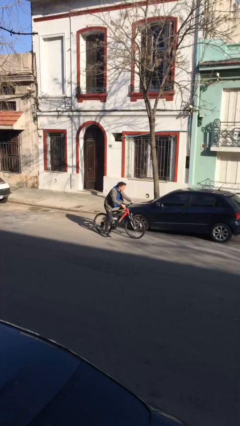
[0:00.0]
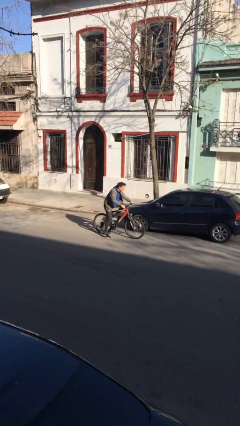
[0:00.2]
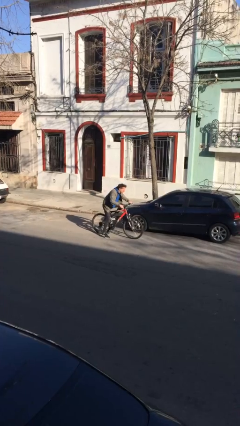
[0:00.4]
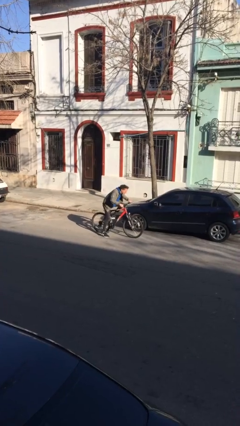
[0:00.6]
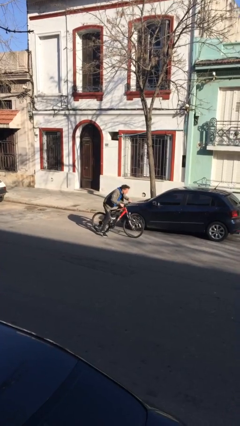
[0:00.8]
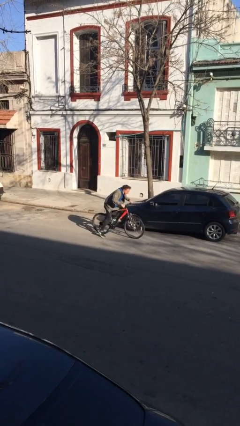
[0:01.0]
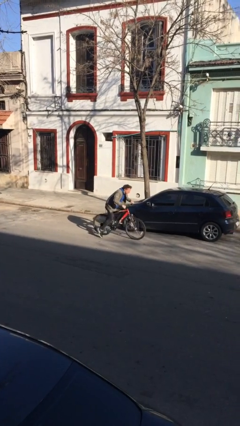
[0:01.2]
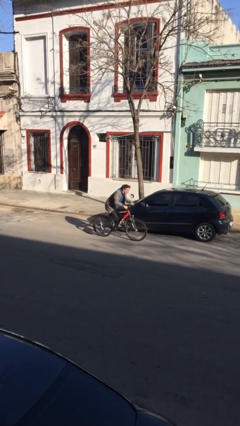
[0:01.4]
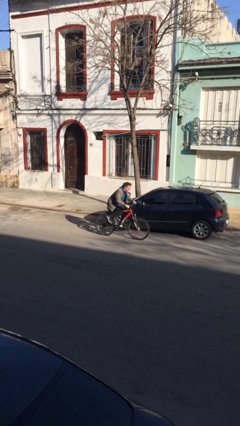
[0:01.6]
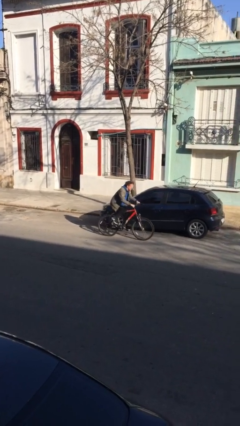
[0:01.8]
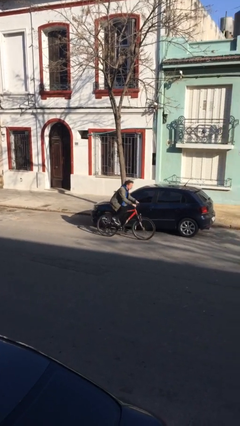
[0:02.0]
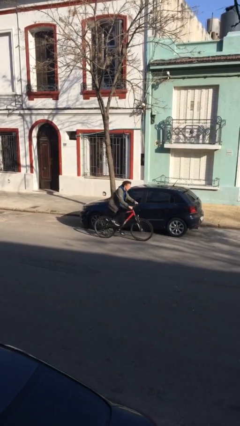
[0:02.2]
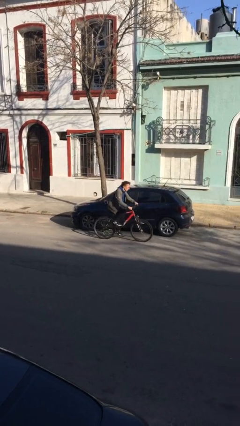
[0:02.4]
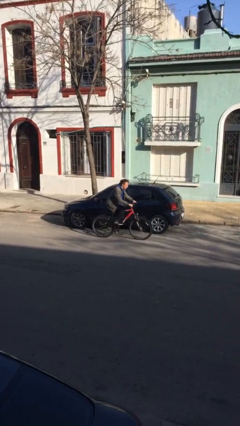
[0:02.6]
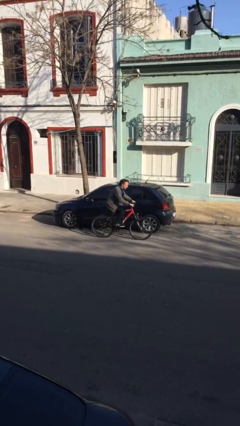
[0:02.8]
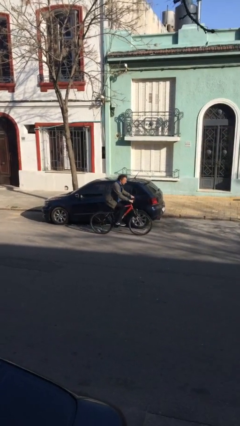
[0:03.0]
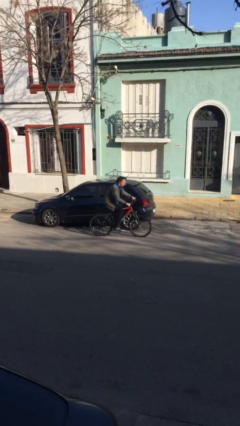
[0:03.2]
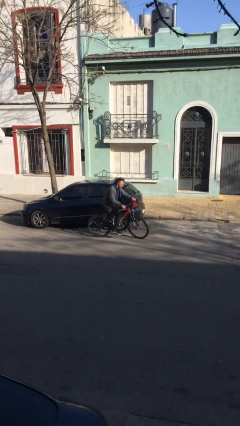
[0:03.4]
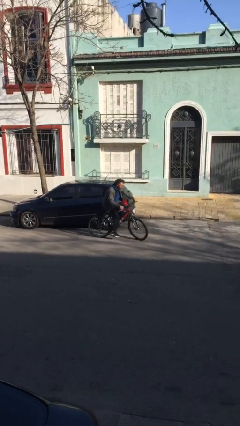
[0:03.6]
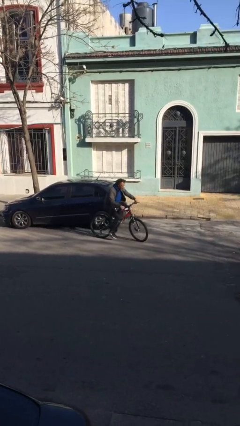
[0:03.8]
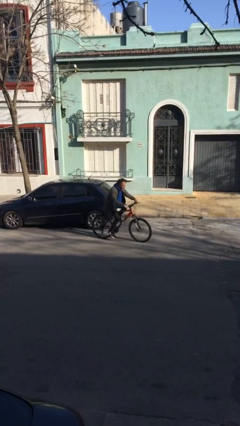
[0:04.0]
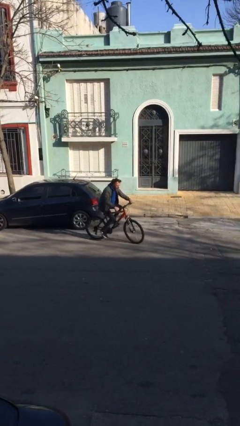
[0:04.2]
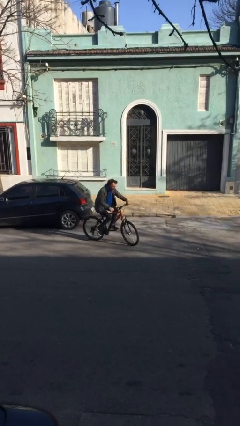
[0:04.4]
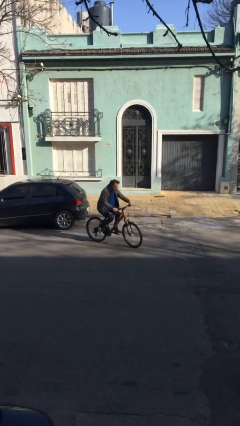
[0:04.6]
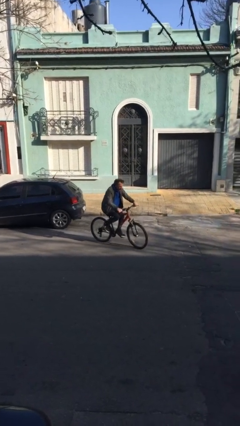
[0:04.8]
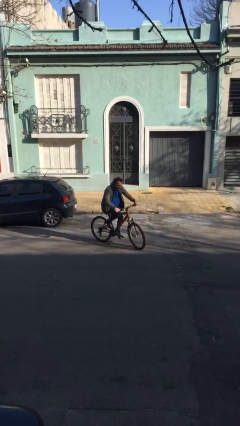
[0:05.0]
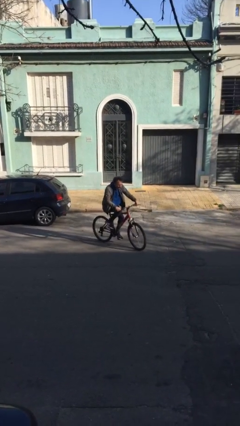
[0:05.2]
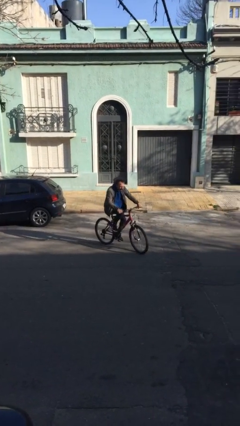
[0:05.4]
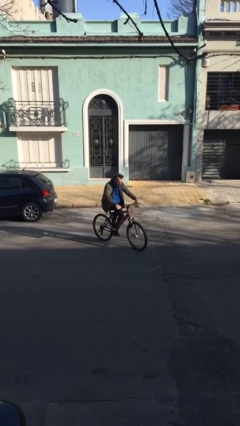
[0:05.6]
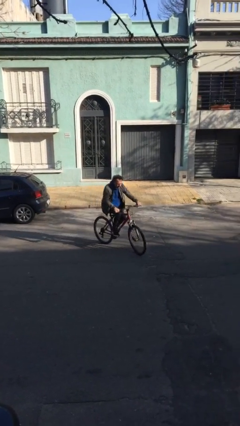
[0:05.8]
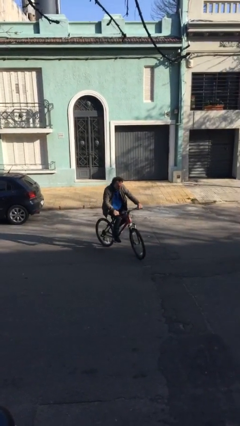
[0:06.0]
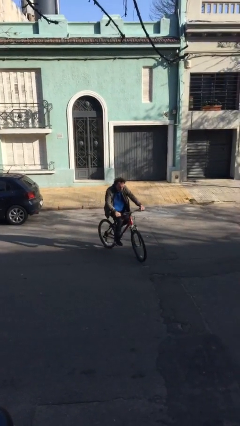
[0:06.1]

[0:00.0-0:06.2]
person rides bicycle

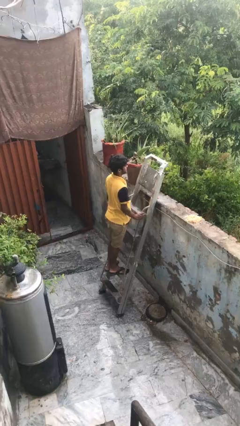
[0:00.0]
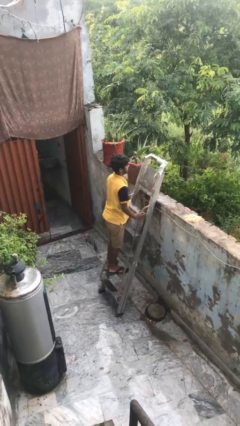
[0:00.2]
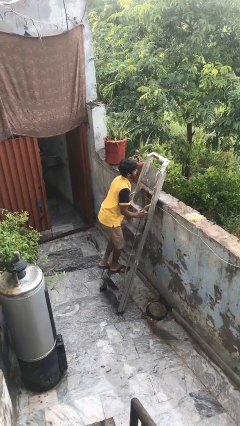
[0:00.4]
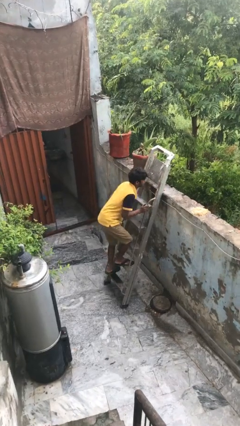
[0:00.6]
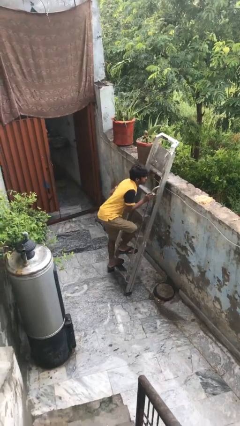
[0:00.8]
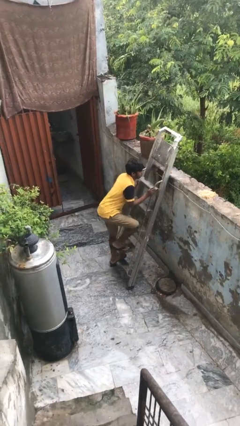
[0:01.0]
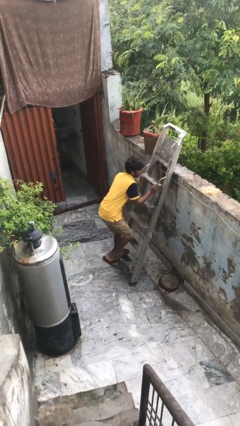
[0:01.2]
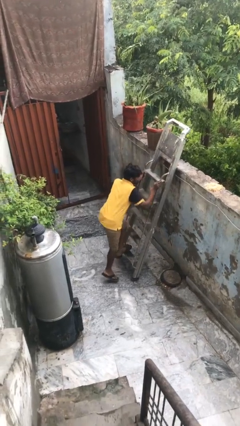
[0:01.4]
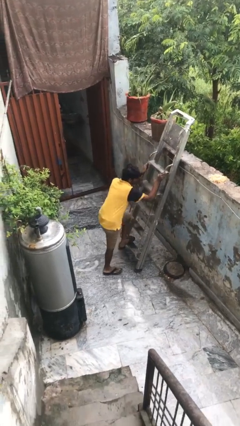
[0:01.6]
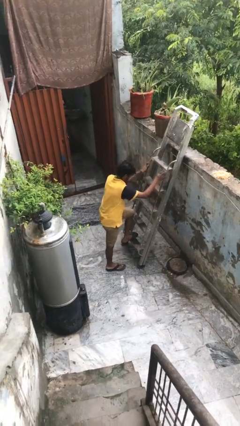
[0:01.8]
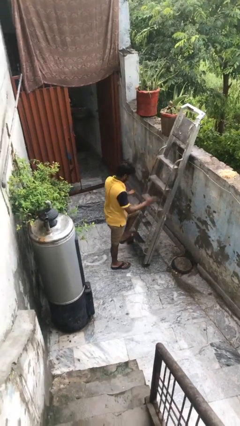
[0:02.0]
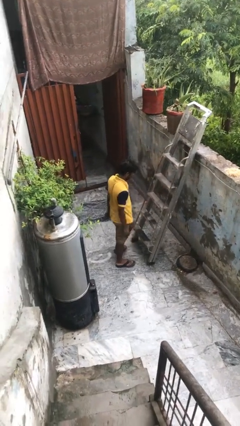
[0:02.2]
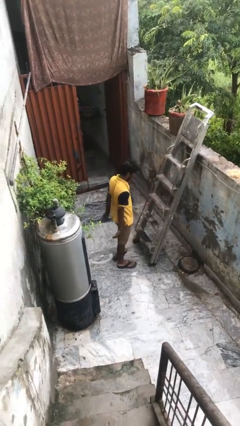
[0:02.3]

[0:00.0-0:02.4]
person climbs down ladder

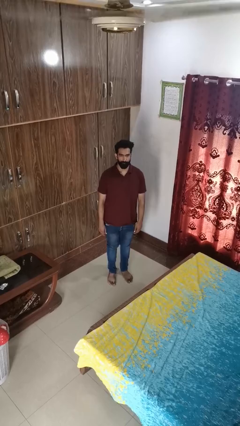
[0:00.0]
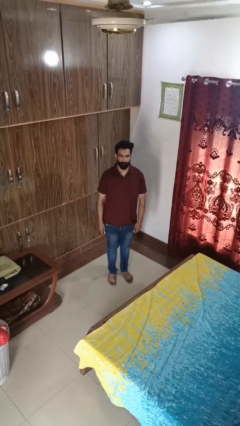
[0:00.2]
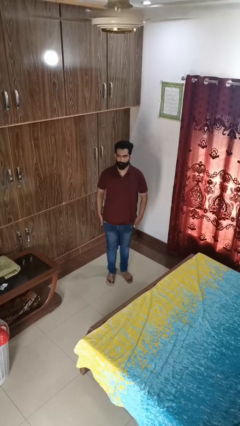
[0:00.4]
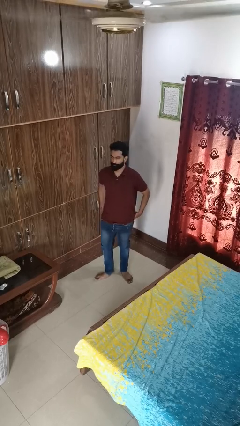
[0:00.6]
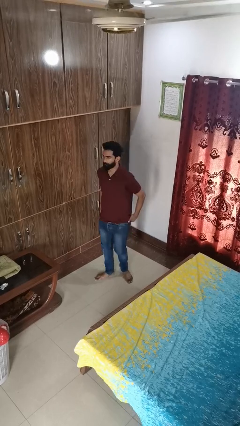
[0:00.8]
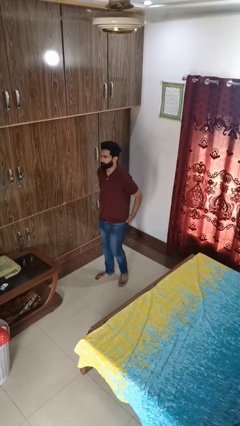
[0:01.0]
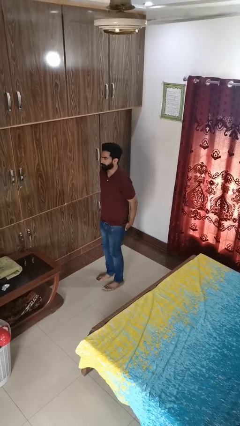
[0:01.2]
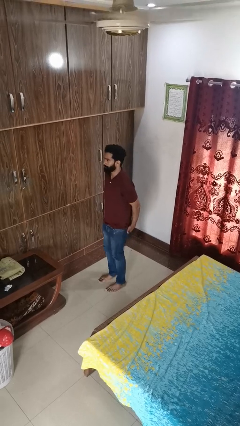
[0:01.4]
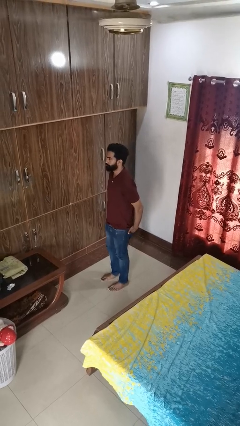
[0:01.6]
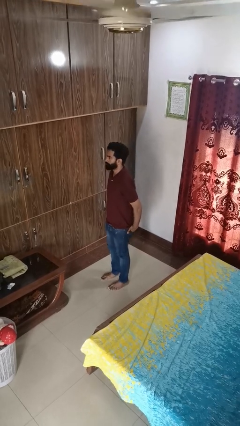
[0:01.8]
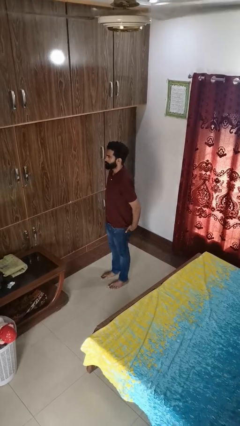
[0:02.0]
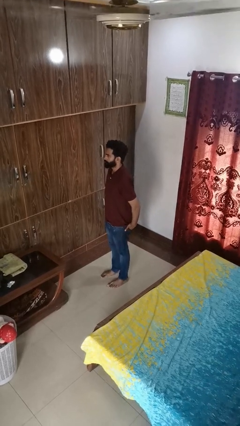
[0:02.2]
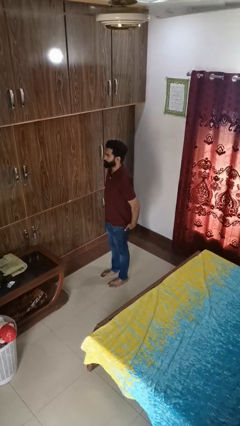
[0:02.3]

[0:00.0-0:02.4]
person puts hands in back pockets

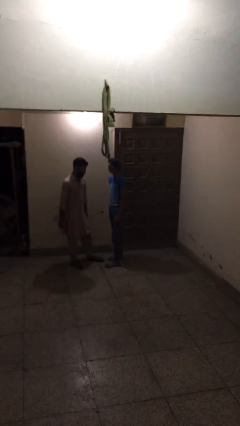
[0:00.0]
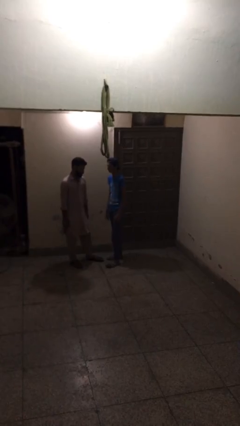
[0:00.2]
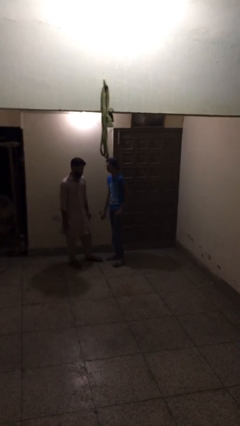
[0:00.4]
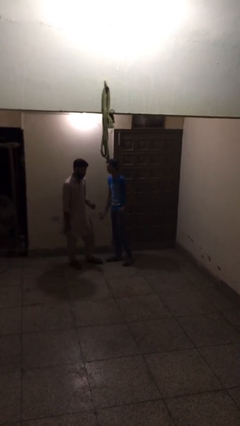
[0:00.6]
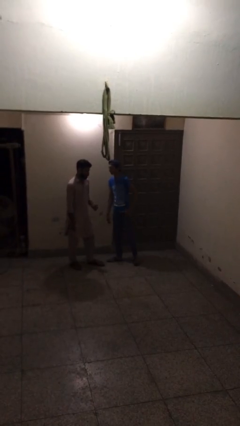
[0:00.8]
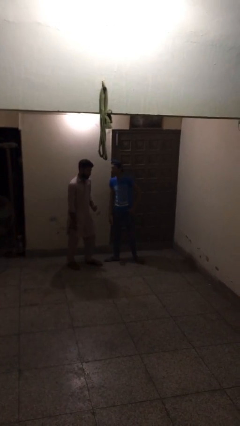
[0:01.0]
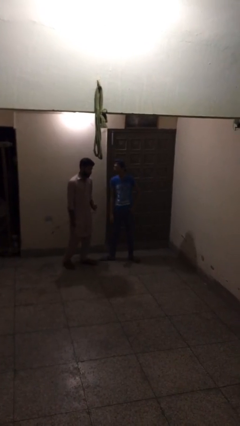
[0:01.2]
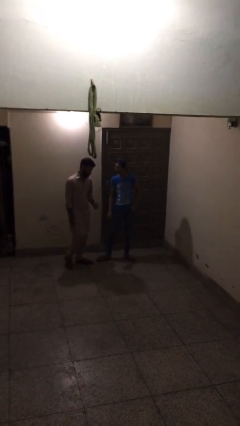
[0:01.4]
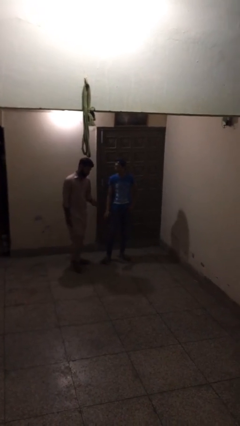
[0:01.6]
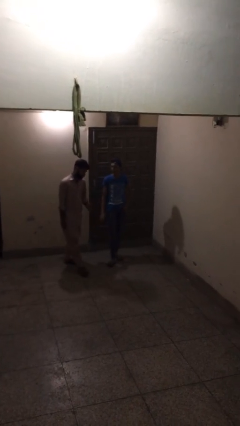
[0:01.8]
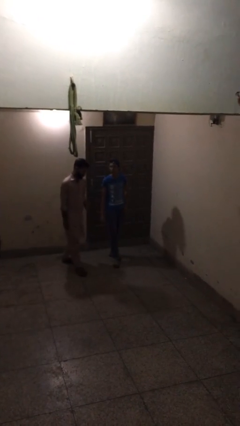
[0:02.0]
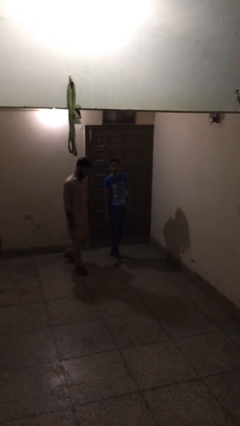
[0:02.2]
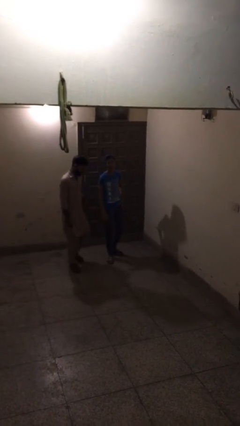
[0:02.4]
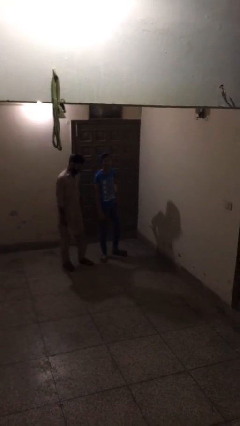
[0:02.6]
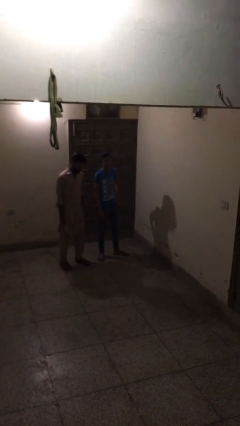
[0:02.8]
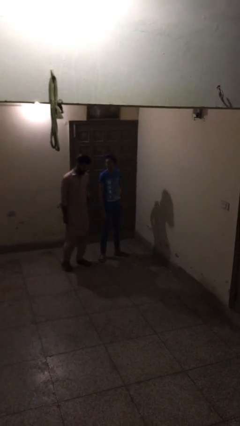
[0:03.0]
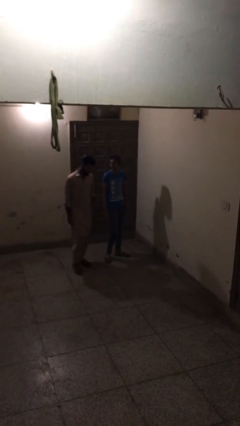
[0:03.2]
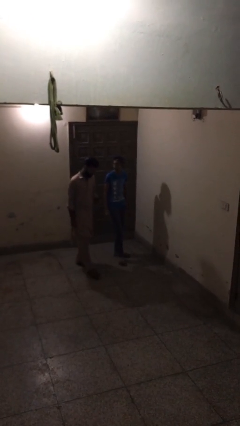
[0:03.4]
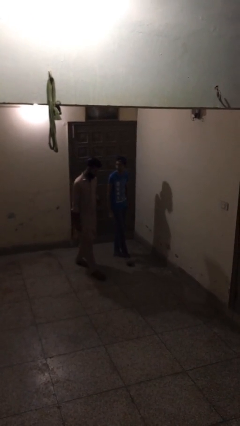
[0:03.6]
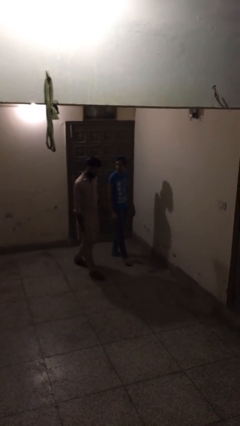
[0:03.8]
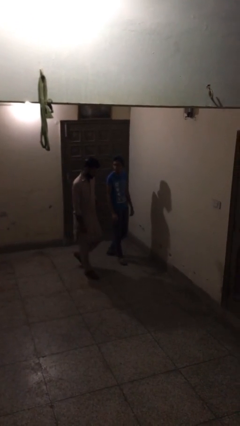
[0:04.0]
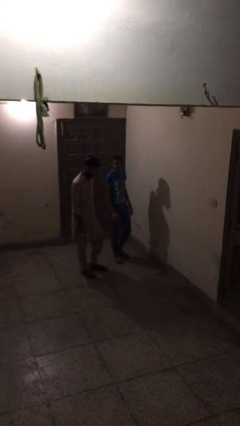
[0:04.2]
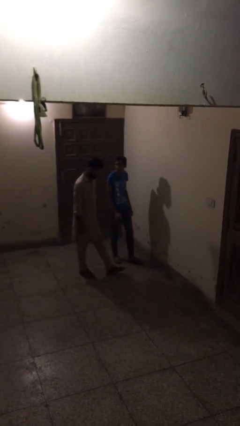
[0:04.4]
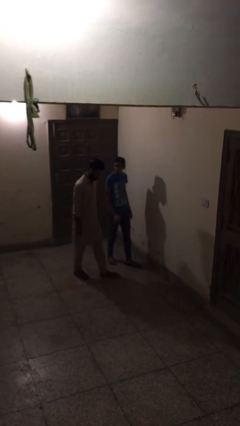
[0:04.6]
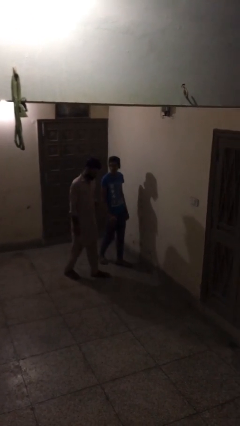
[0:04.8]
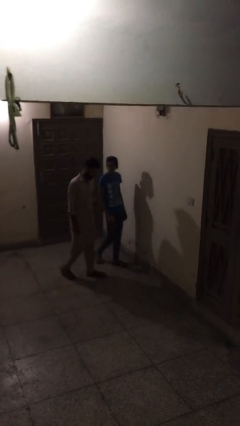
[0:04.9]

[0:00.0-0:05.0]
person talks to person

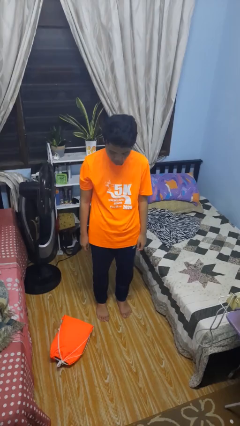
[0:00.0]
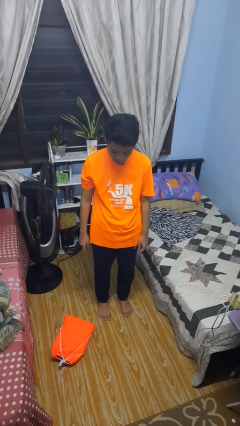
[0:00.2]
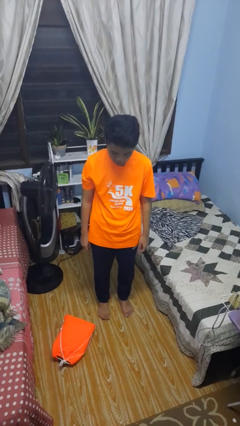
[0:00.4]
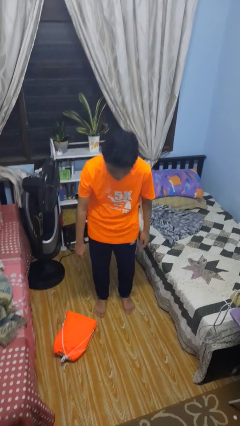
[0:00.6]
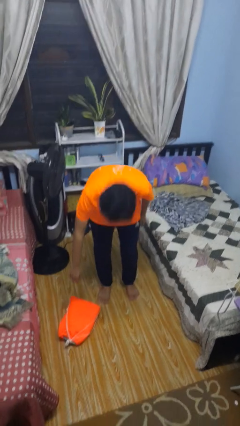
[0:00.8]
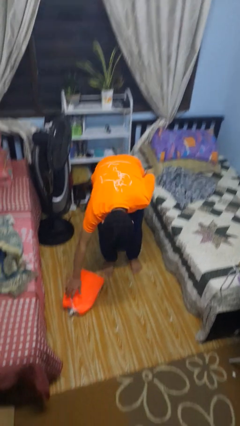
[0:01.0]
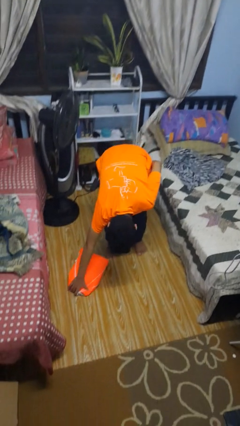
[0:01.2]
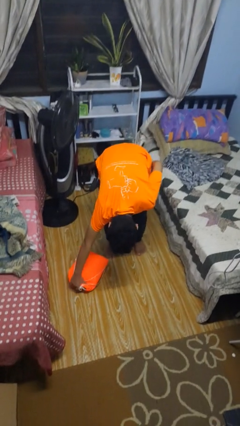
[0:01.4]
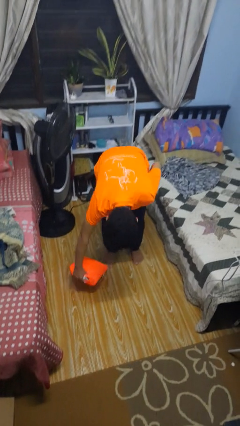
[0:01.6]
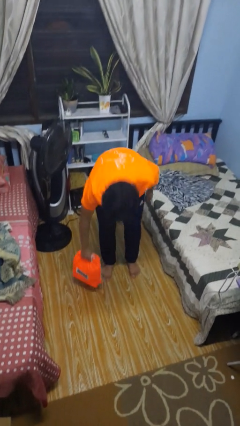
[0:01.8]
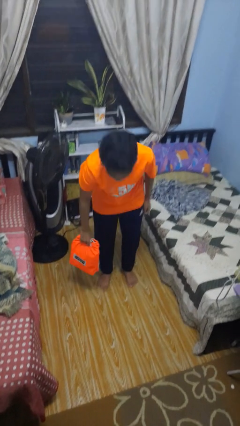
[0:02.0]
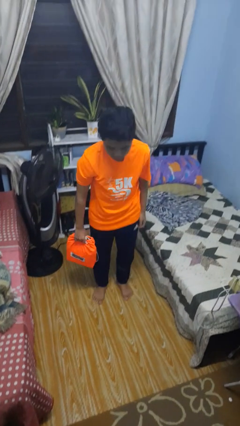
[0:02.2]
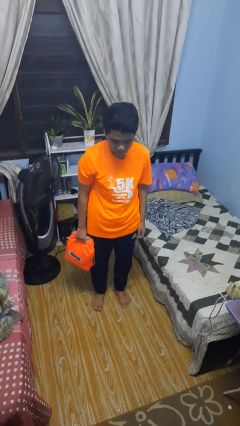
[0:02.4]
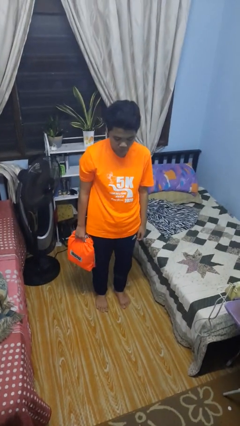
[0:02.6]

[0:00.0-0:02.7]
person picks up object from floor
